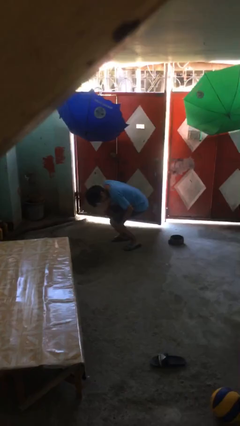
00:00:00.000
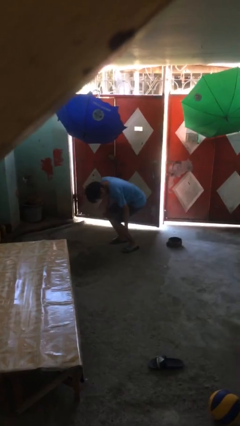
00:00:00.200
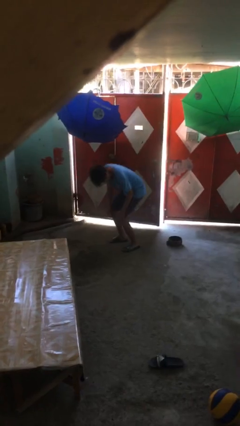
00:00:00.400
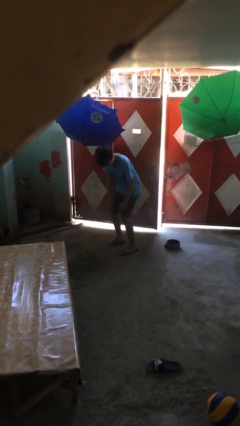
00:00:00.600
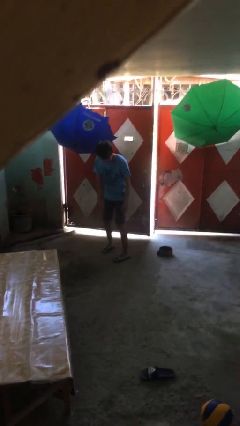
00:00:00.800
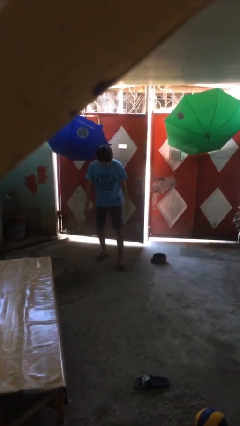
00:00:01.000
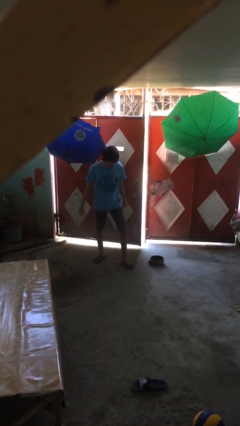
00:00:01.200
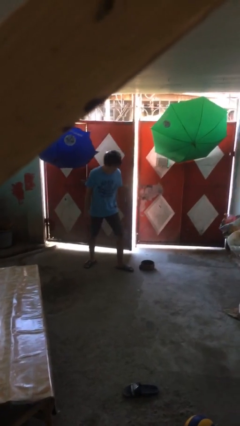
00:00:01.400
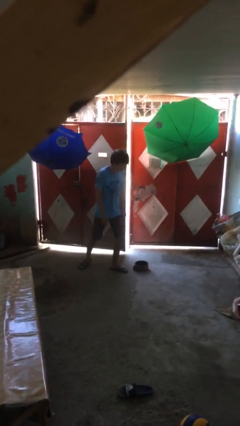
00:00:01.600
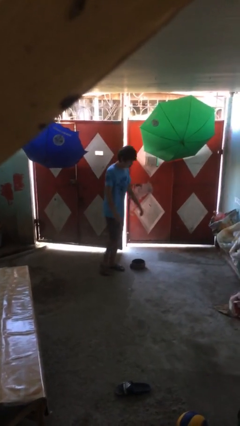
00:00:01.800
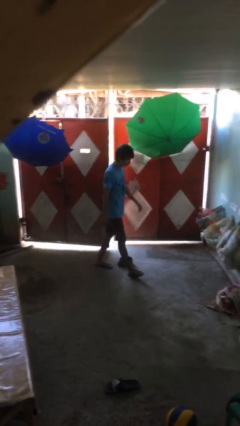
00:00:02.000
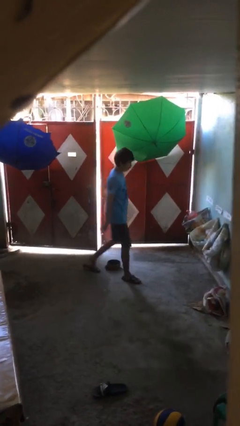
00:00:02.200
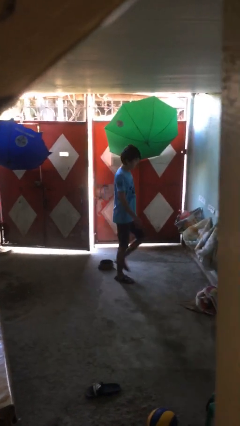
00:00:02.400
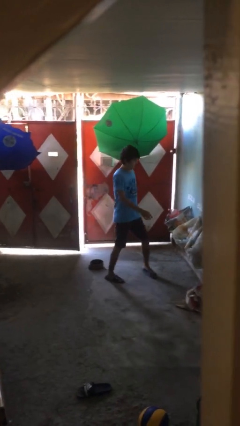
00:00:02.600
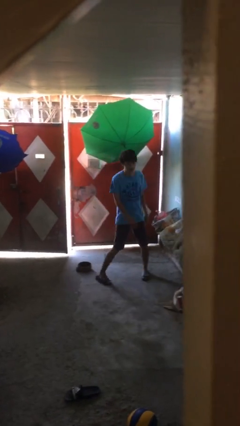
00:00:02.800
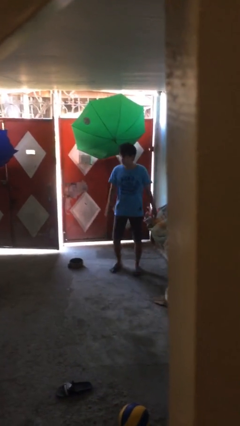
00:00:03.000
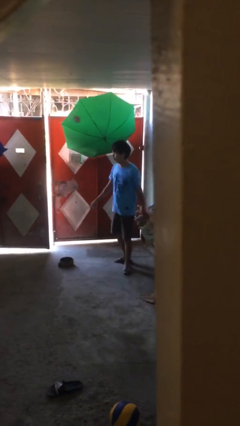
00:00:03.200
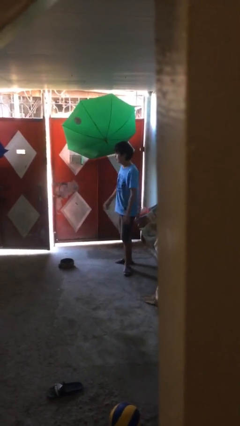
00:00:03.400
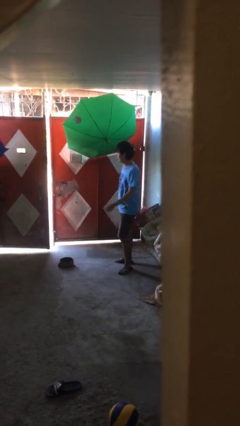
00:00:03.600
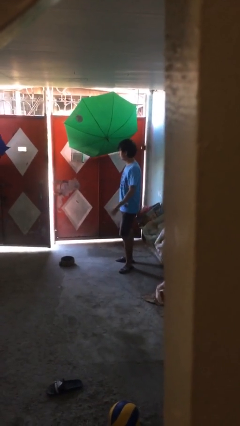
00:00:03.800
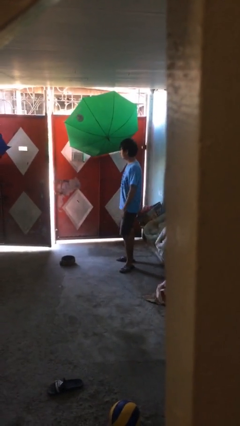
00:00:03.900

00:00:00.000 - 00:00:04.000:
person stands up from floor

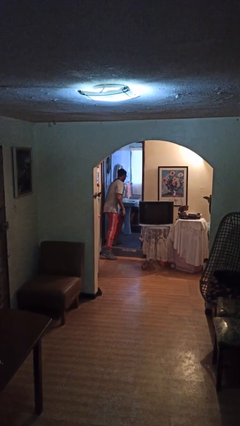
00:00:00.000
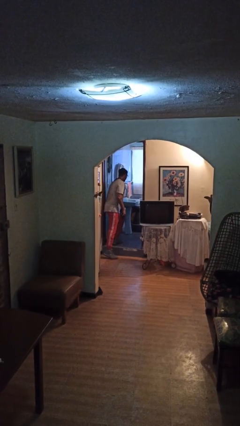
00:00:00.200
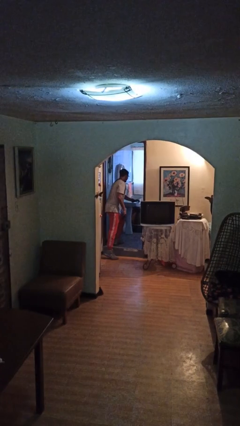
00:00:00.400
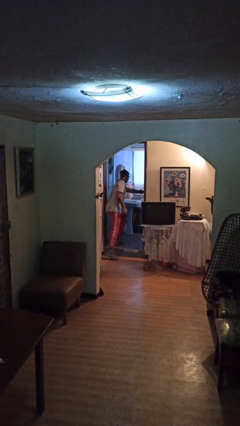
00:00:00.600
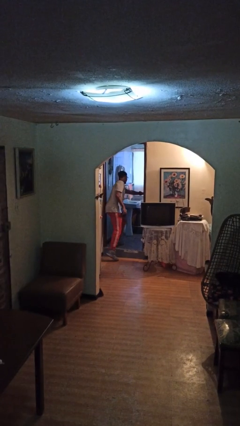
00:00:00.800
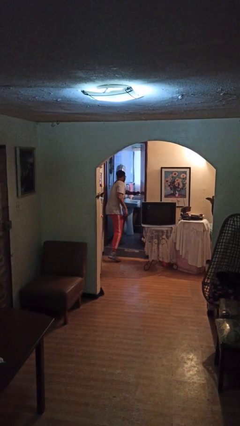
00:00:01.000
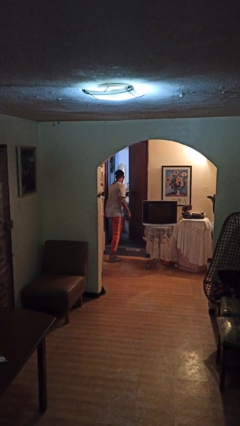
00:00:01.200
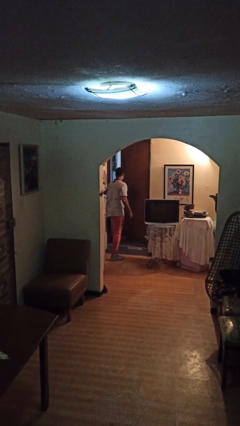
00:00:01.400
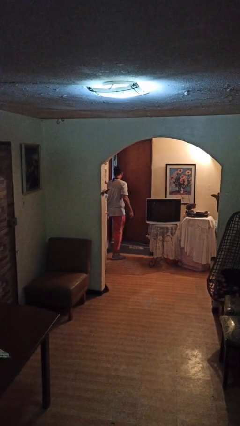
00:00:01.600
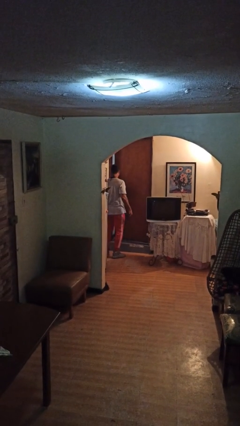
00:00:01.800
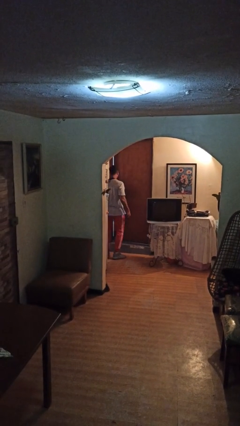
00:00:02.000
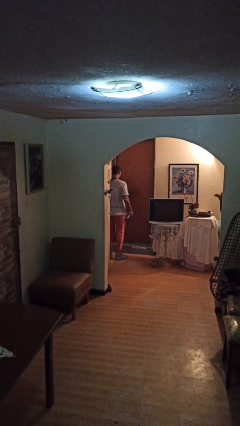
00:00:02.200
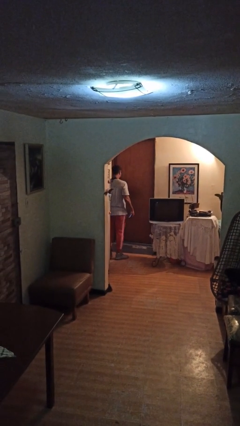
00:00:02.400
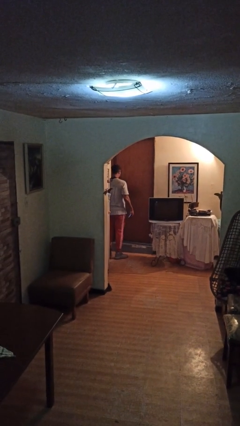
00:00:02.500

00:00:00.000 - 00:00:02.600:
person closes facility door

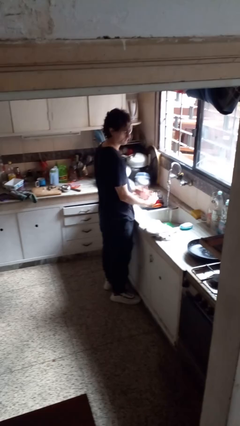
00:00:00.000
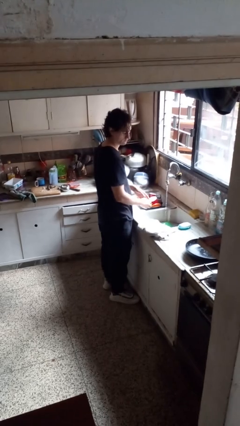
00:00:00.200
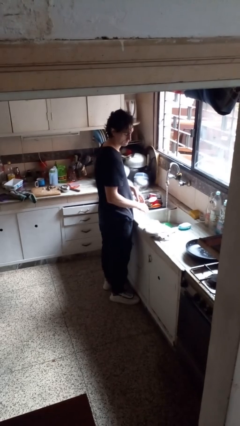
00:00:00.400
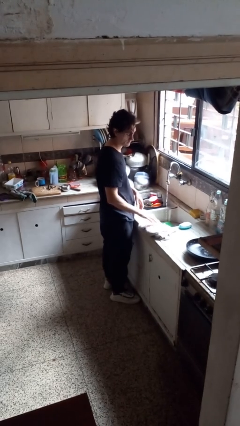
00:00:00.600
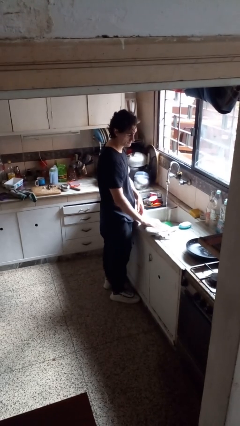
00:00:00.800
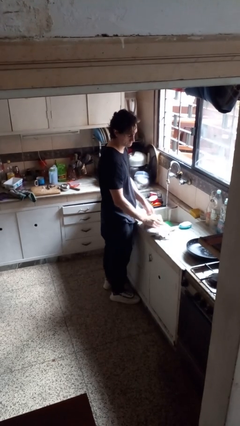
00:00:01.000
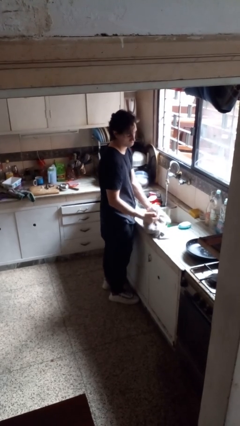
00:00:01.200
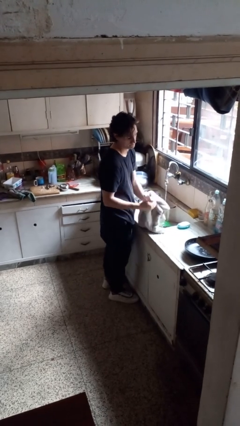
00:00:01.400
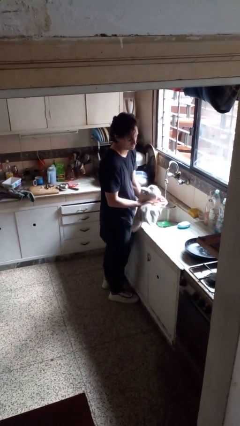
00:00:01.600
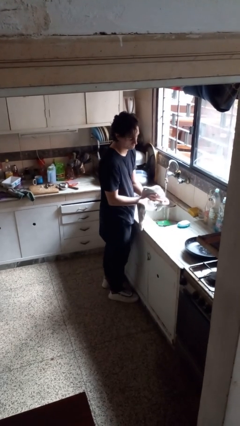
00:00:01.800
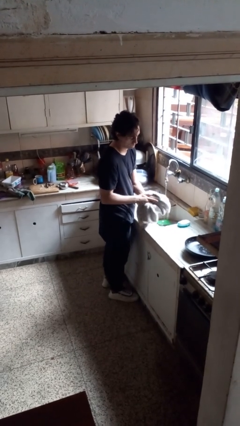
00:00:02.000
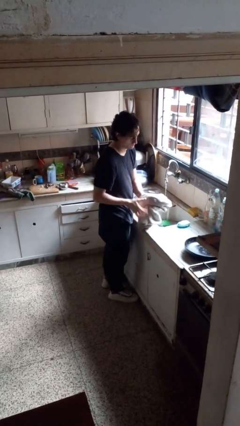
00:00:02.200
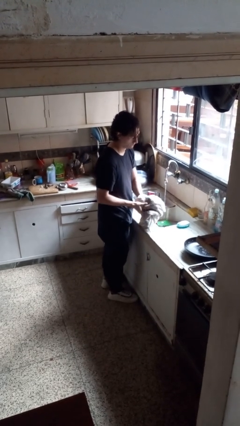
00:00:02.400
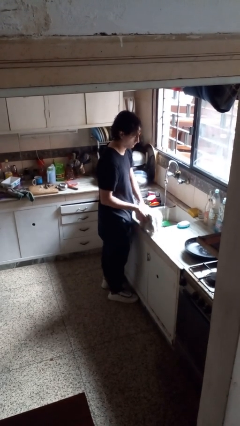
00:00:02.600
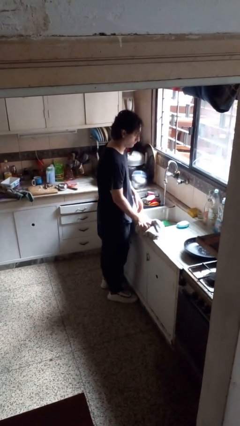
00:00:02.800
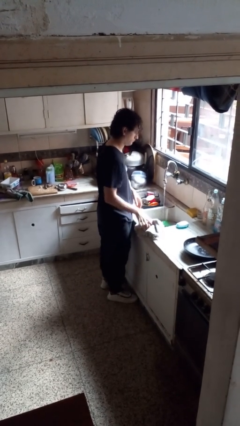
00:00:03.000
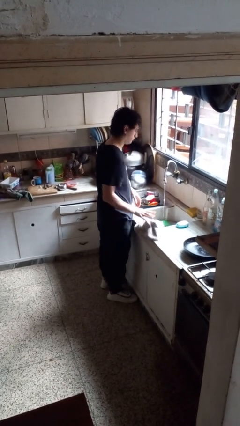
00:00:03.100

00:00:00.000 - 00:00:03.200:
person dries hands with towel

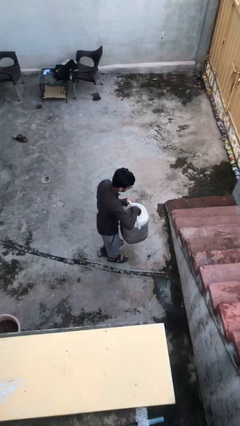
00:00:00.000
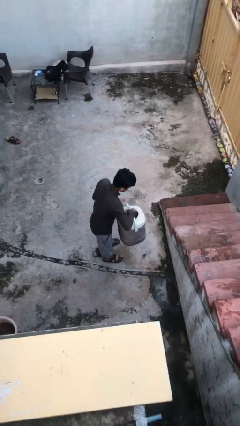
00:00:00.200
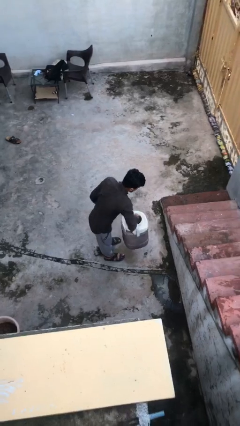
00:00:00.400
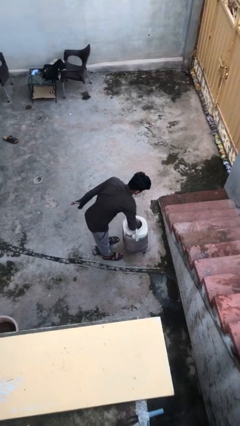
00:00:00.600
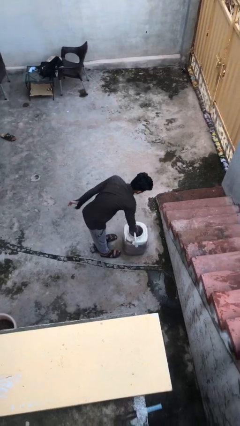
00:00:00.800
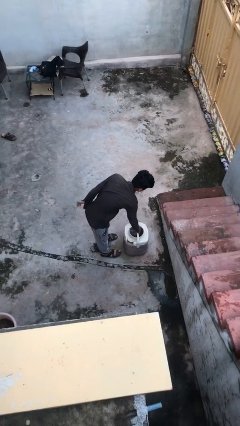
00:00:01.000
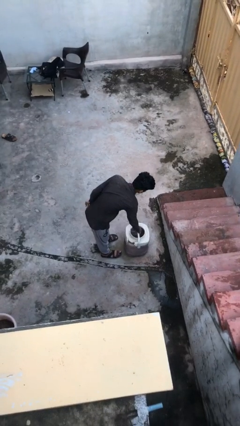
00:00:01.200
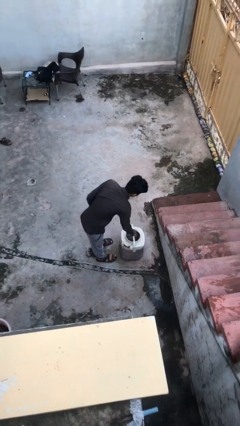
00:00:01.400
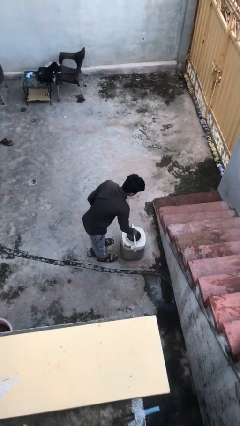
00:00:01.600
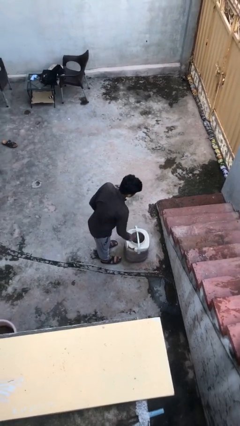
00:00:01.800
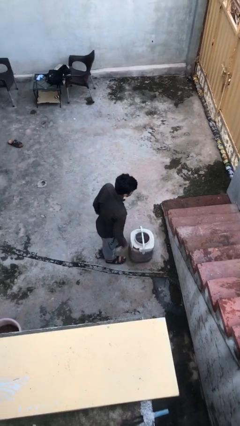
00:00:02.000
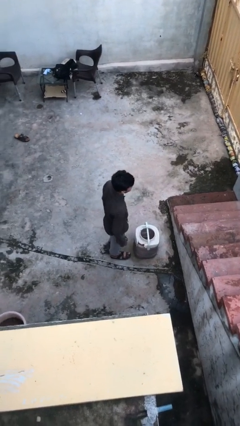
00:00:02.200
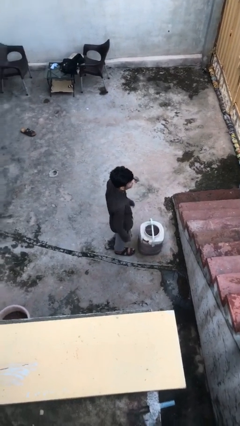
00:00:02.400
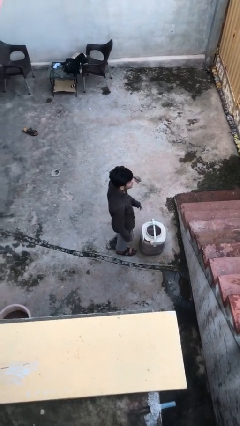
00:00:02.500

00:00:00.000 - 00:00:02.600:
person puts down object on floor

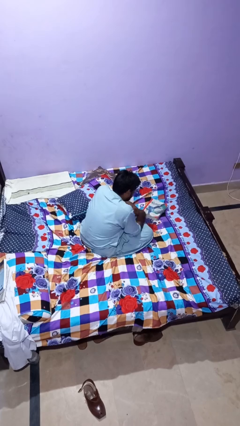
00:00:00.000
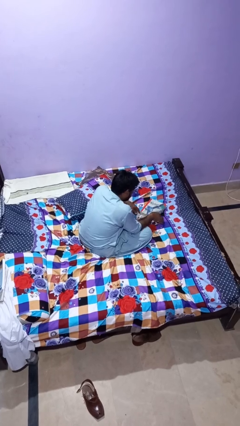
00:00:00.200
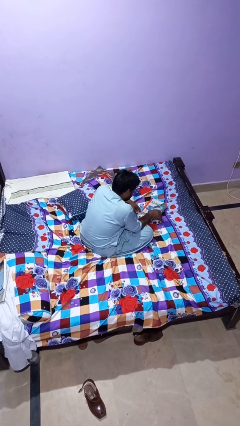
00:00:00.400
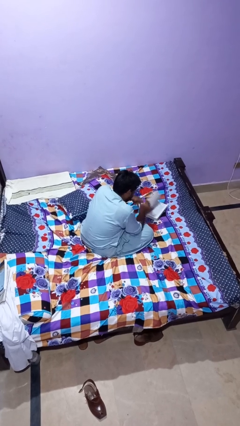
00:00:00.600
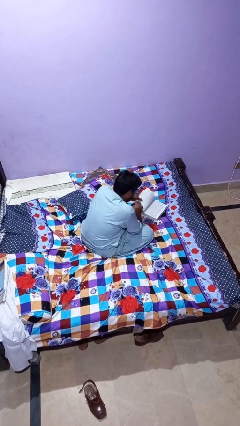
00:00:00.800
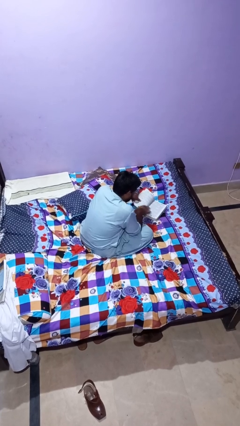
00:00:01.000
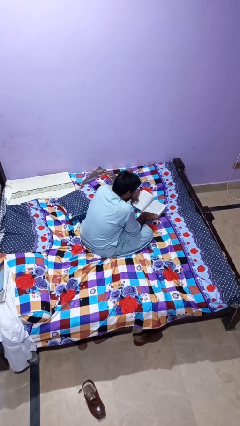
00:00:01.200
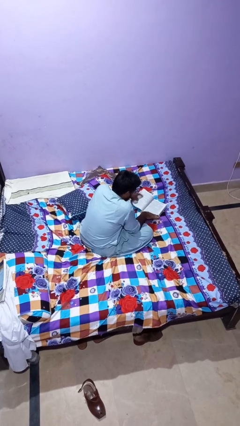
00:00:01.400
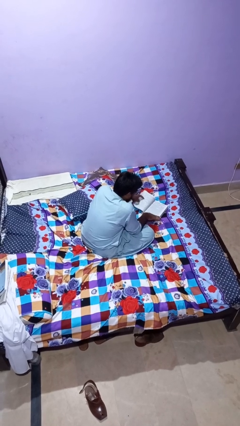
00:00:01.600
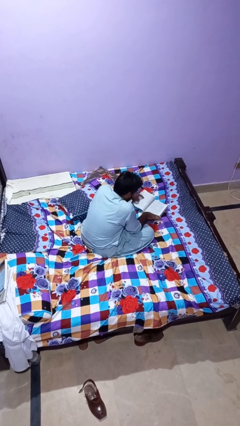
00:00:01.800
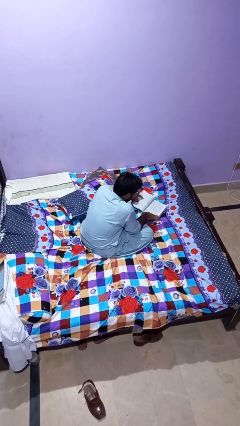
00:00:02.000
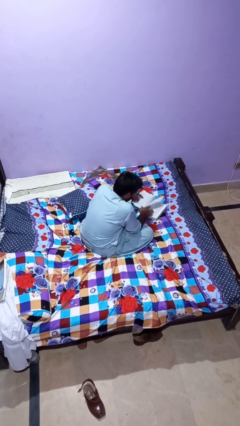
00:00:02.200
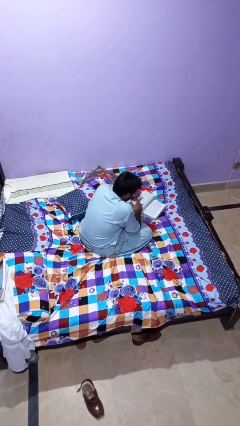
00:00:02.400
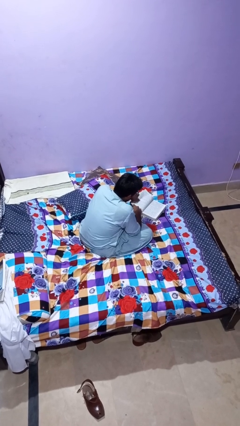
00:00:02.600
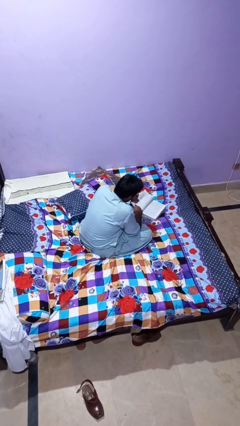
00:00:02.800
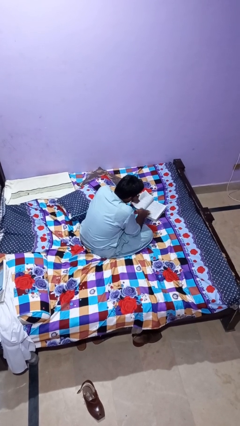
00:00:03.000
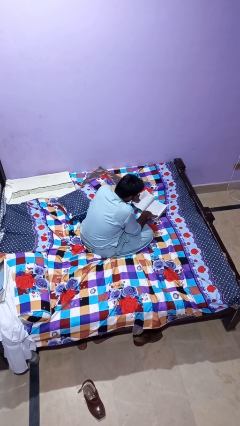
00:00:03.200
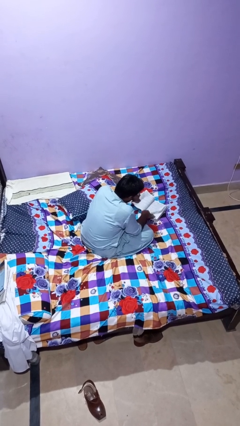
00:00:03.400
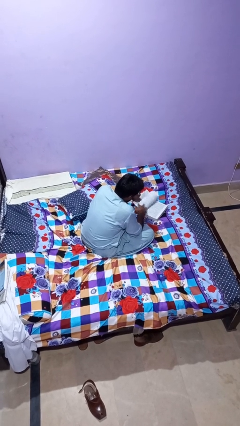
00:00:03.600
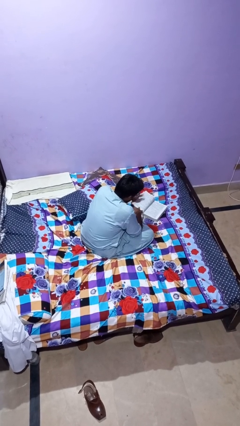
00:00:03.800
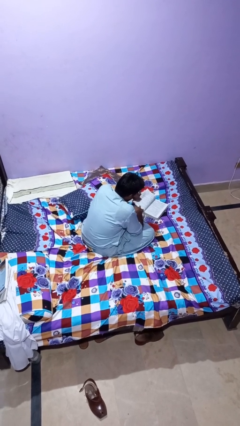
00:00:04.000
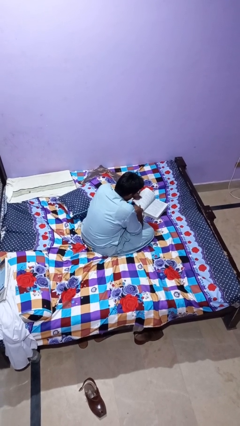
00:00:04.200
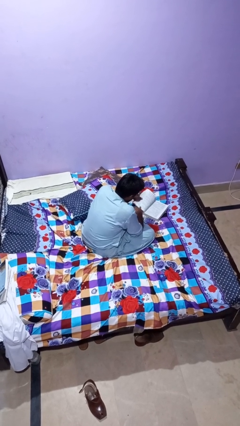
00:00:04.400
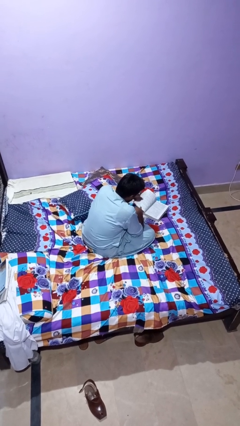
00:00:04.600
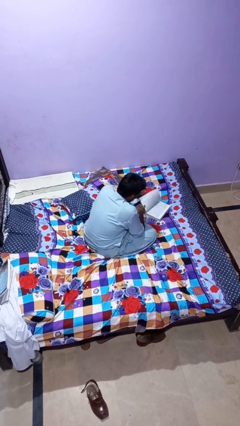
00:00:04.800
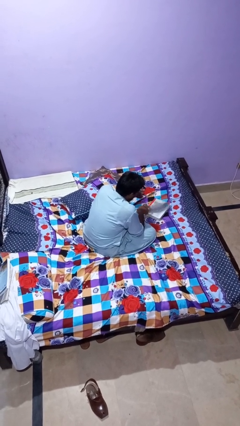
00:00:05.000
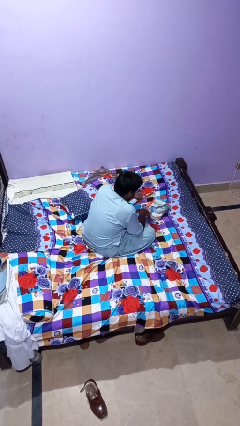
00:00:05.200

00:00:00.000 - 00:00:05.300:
person reads book
